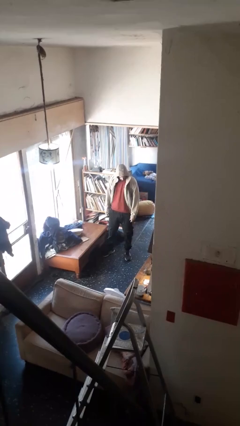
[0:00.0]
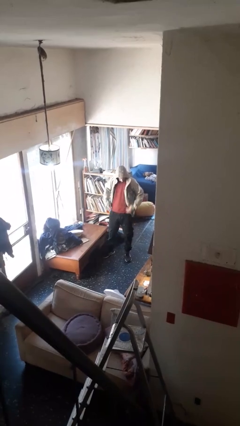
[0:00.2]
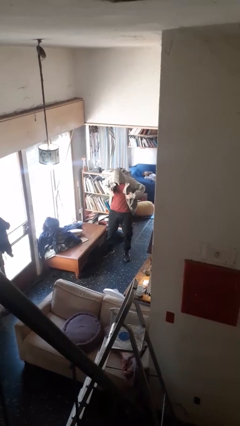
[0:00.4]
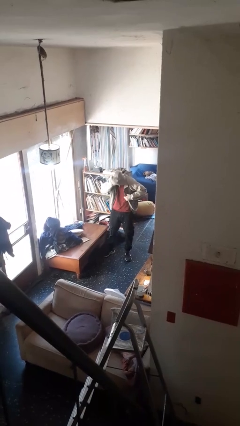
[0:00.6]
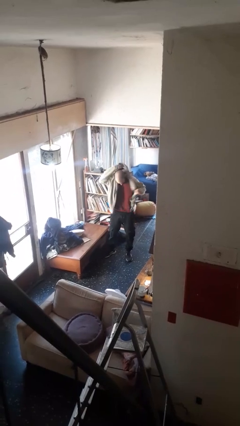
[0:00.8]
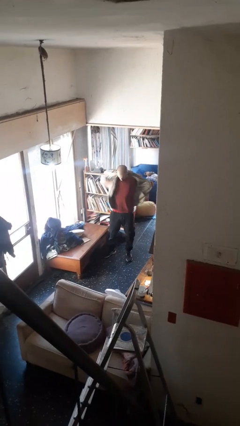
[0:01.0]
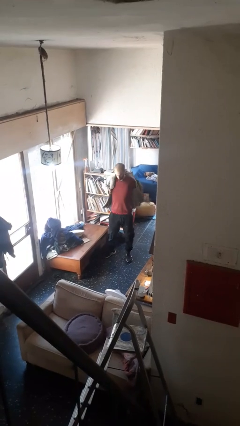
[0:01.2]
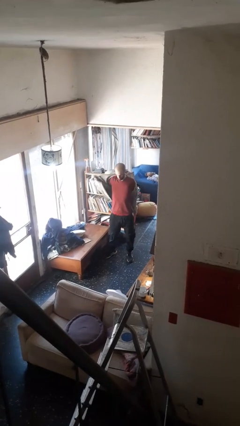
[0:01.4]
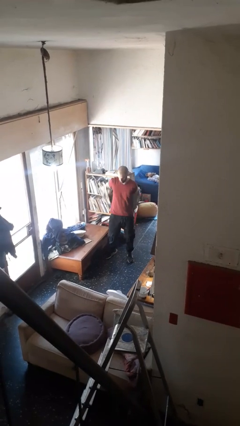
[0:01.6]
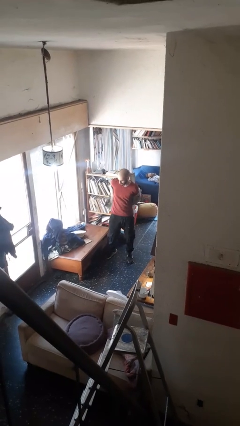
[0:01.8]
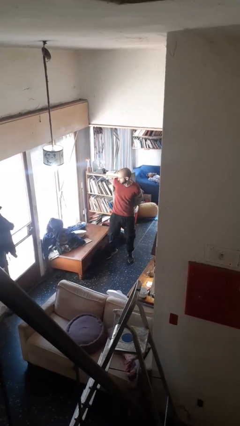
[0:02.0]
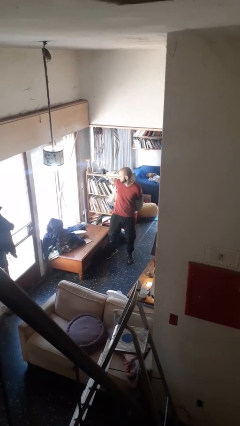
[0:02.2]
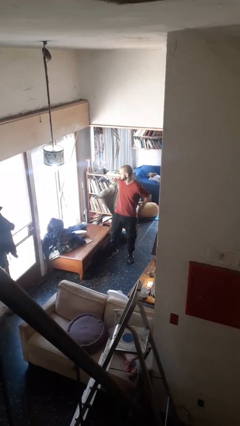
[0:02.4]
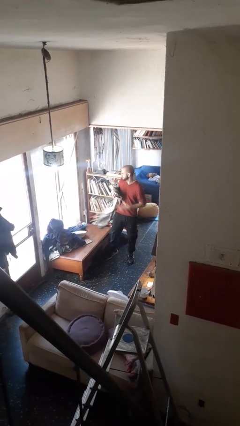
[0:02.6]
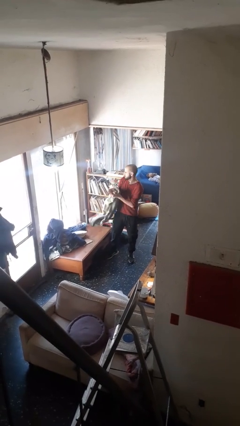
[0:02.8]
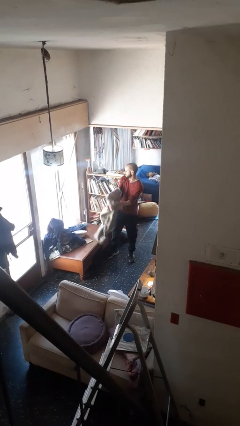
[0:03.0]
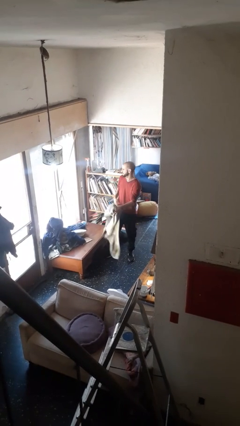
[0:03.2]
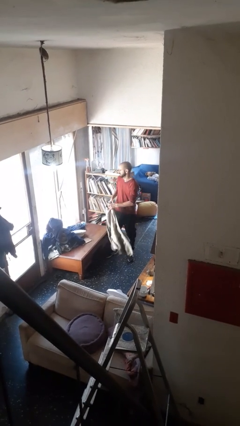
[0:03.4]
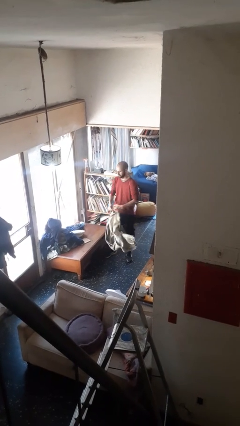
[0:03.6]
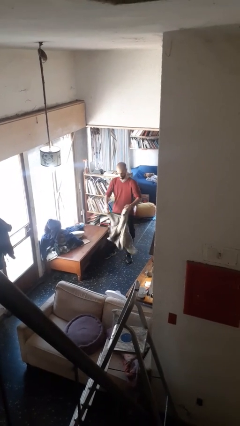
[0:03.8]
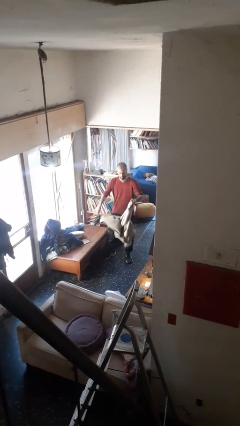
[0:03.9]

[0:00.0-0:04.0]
person takes off hoodie

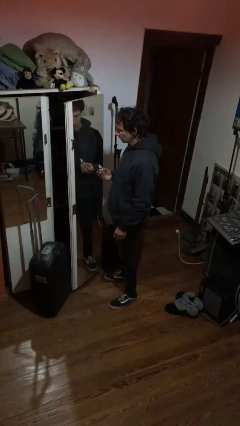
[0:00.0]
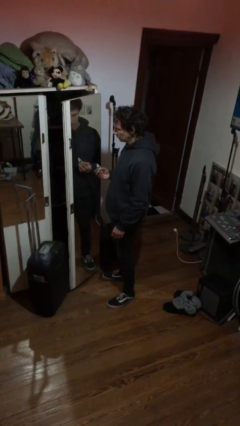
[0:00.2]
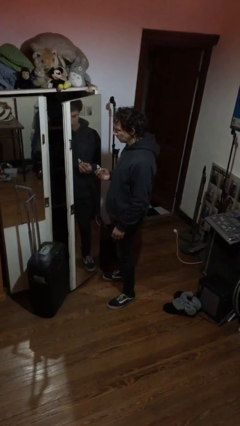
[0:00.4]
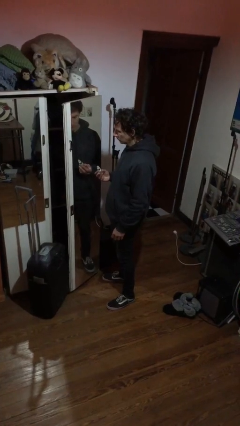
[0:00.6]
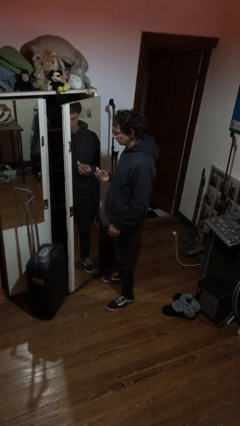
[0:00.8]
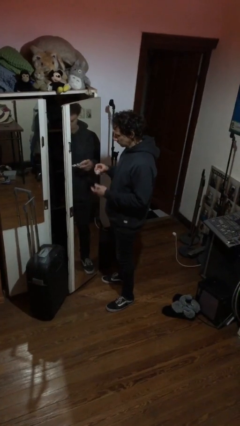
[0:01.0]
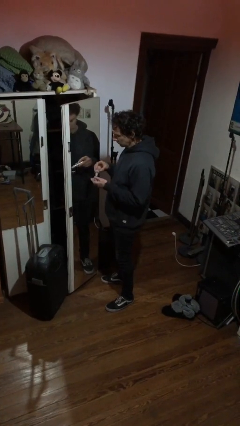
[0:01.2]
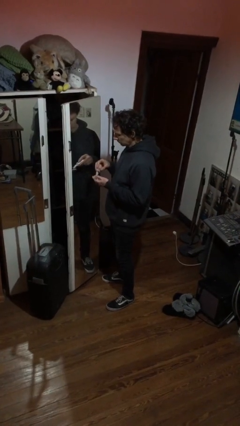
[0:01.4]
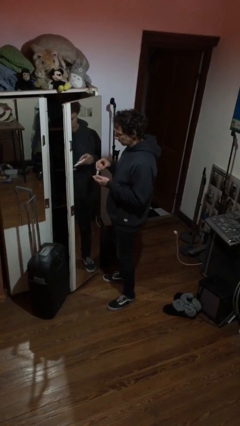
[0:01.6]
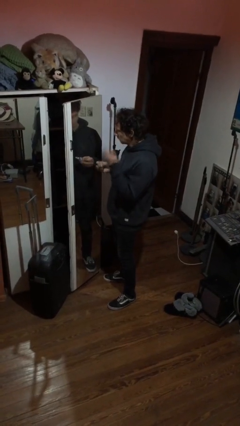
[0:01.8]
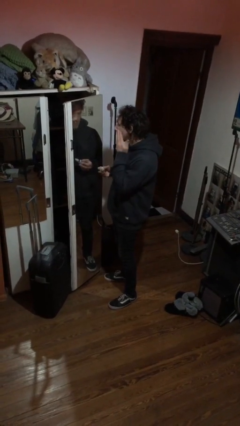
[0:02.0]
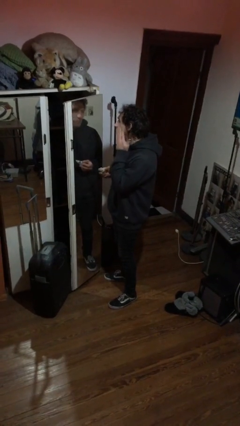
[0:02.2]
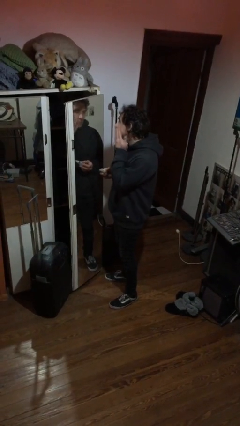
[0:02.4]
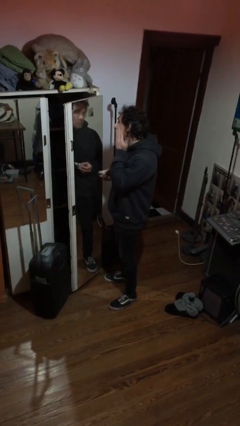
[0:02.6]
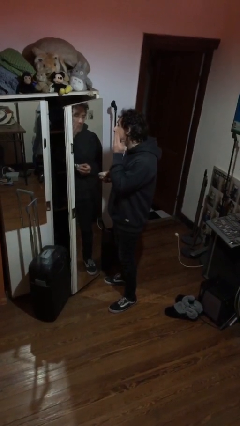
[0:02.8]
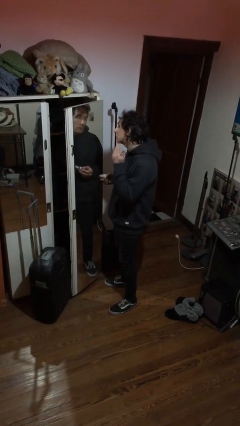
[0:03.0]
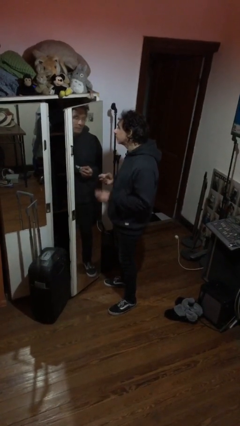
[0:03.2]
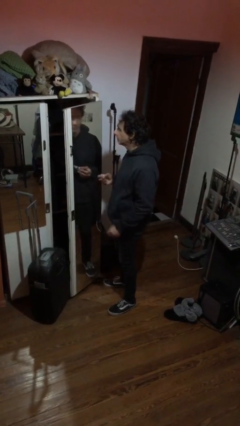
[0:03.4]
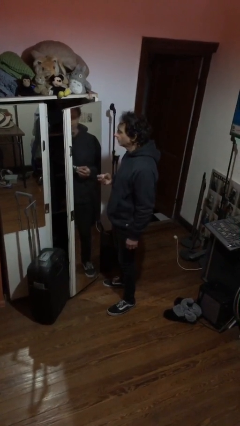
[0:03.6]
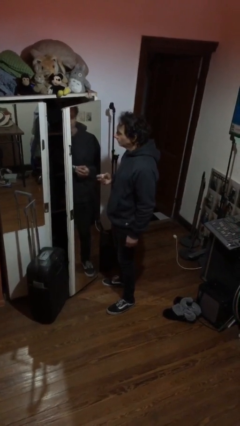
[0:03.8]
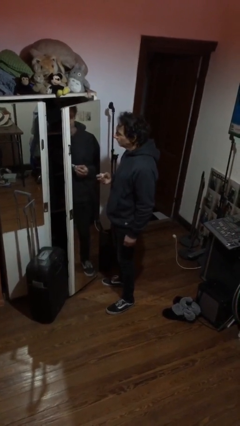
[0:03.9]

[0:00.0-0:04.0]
person applies foundation makeup

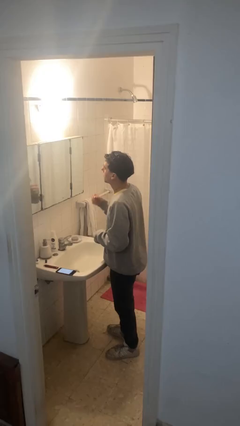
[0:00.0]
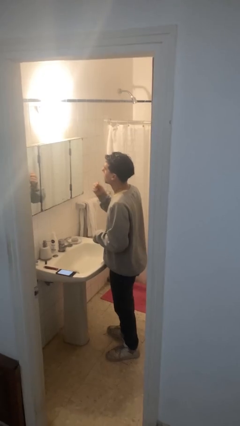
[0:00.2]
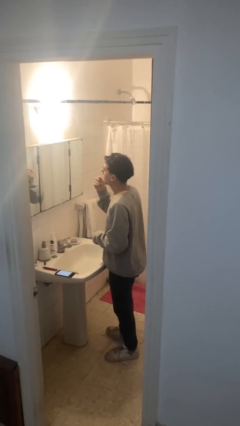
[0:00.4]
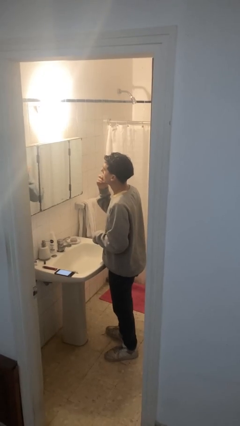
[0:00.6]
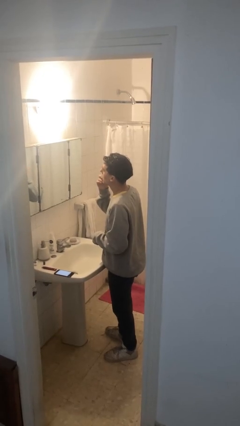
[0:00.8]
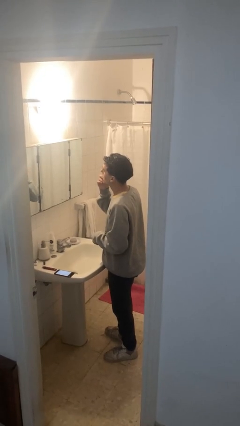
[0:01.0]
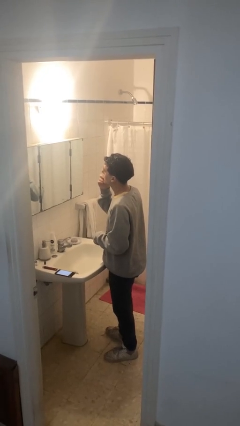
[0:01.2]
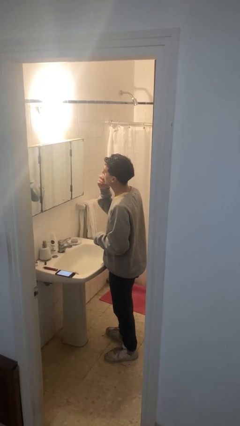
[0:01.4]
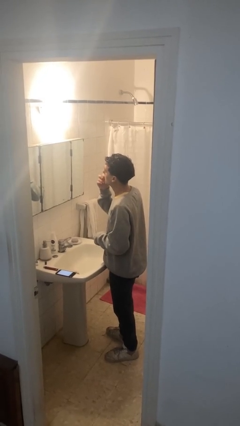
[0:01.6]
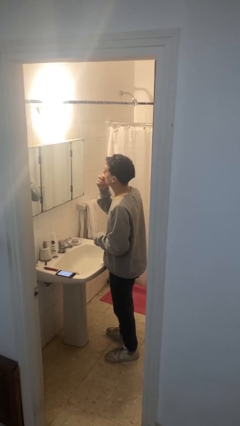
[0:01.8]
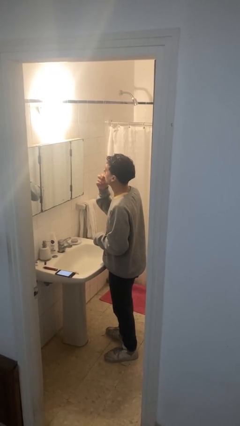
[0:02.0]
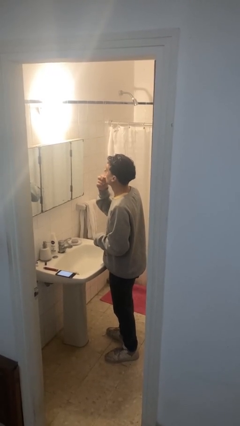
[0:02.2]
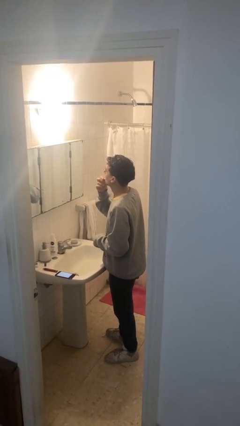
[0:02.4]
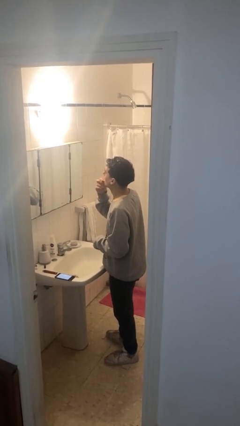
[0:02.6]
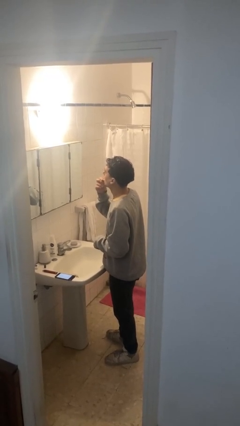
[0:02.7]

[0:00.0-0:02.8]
person applies lip makeup

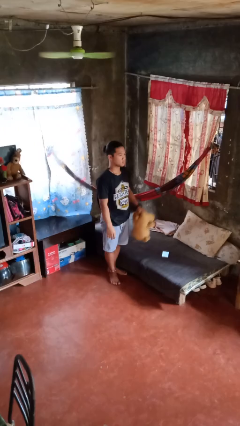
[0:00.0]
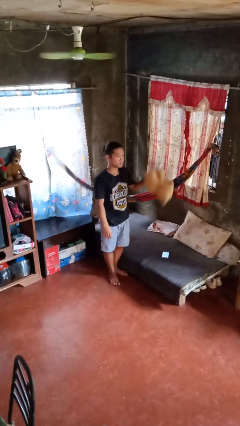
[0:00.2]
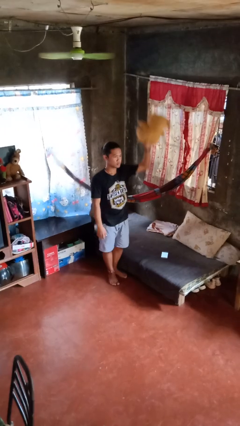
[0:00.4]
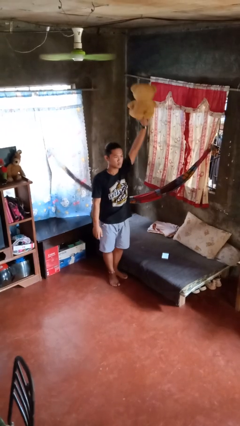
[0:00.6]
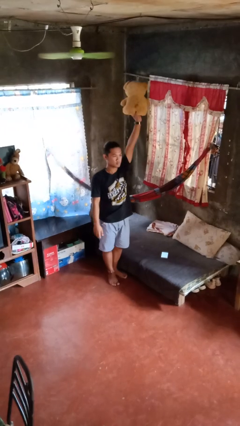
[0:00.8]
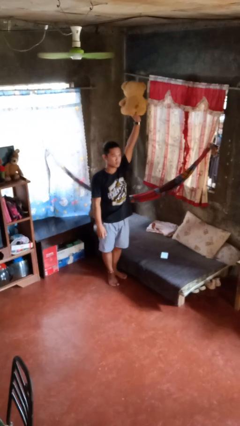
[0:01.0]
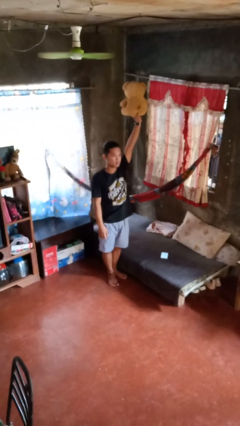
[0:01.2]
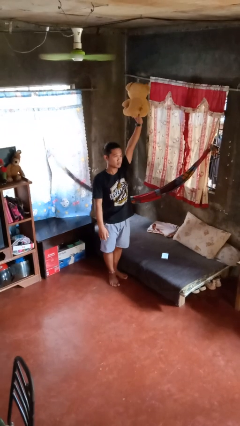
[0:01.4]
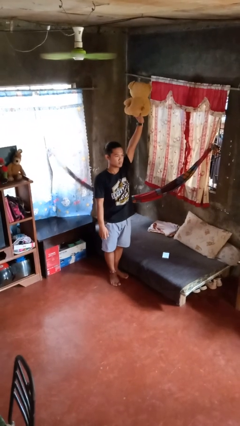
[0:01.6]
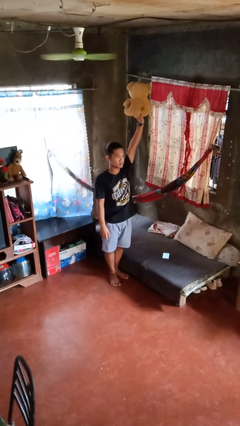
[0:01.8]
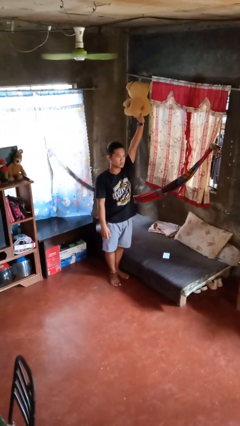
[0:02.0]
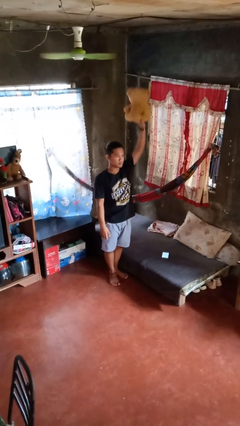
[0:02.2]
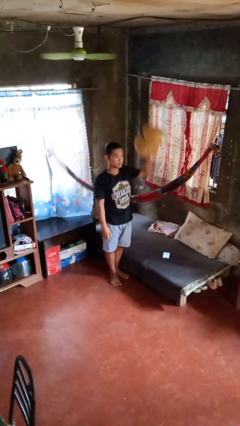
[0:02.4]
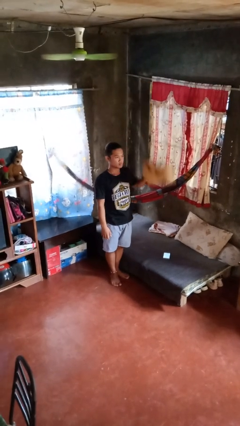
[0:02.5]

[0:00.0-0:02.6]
person holds object above head

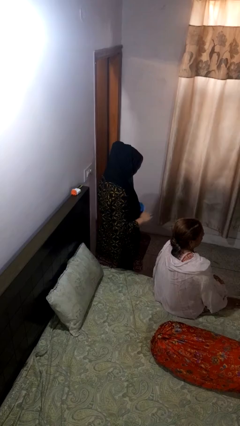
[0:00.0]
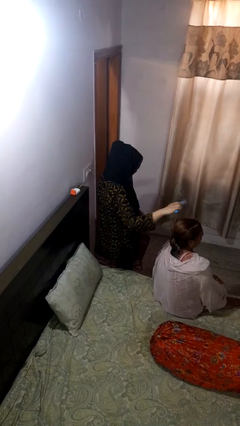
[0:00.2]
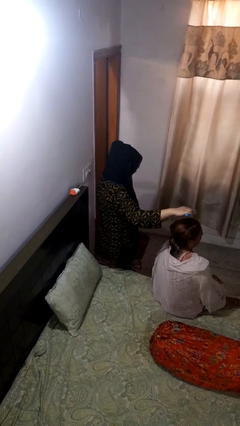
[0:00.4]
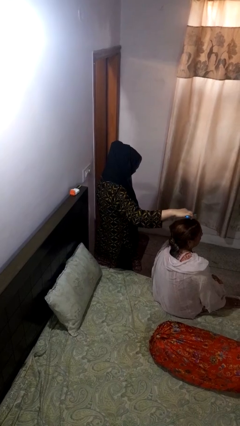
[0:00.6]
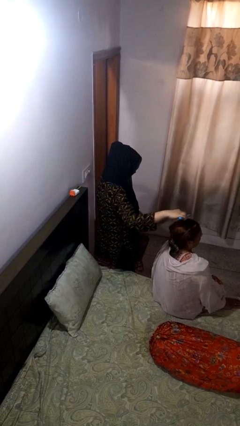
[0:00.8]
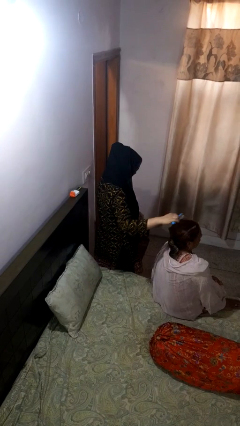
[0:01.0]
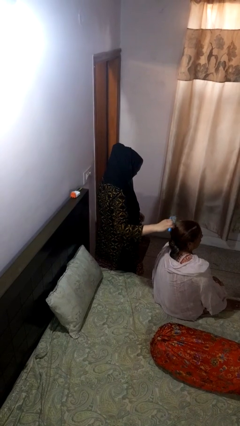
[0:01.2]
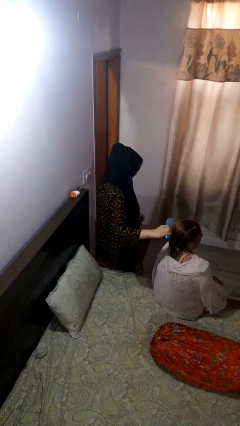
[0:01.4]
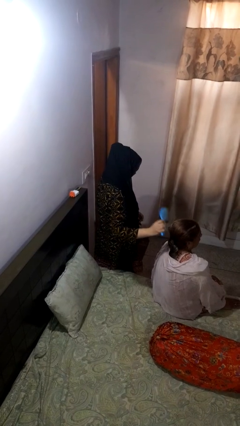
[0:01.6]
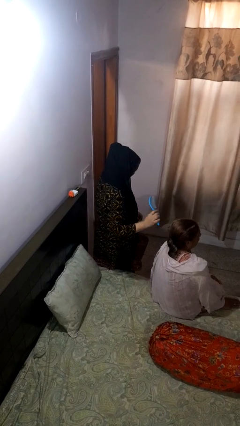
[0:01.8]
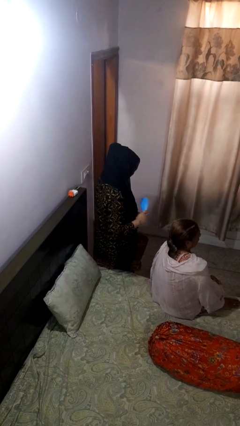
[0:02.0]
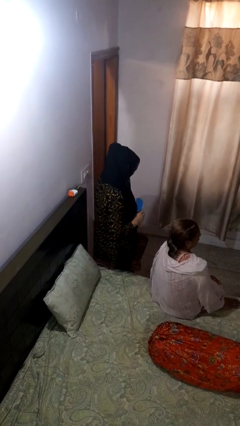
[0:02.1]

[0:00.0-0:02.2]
person brushes hair of person

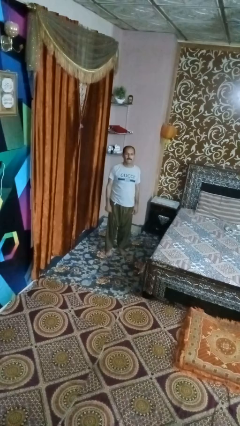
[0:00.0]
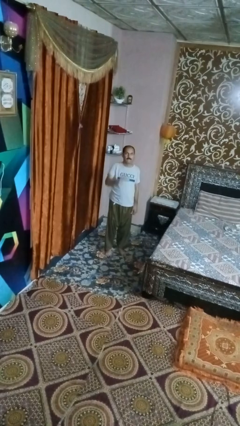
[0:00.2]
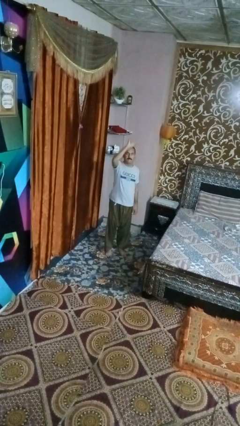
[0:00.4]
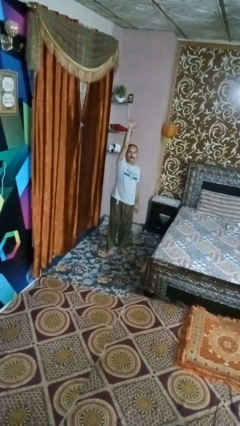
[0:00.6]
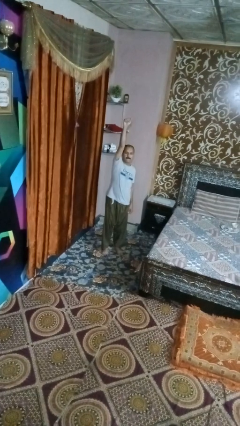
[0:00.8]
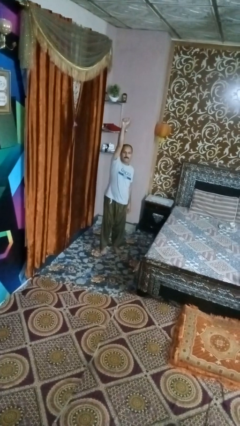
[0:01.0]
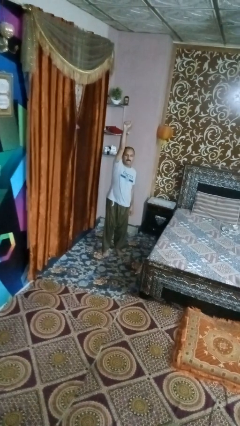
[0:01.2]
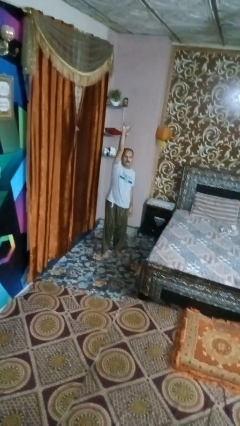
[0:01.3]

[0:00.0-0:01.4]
person punches
